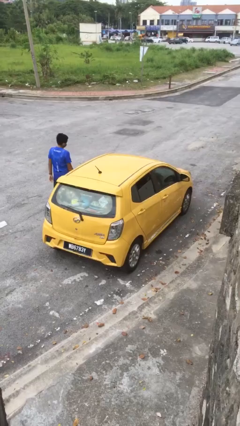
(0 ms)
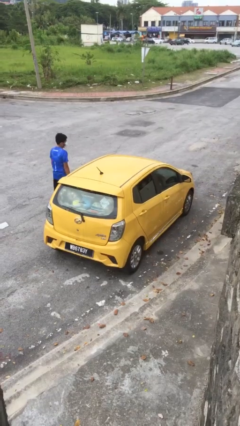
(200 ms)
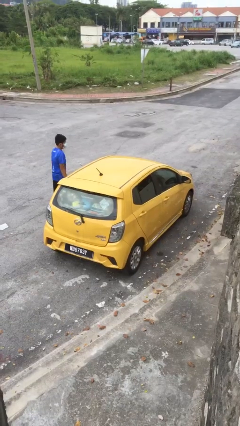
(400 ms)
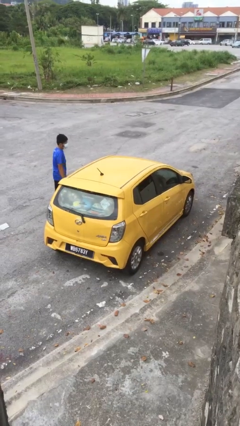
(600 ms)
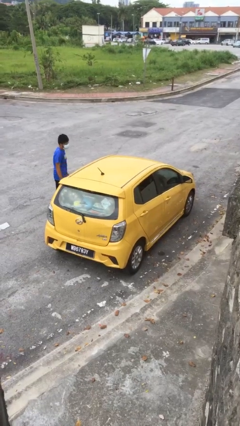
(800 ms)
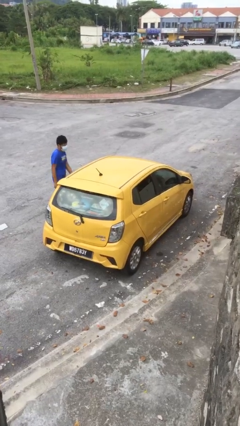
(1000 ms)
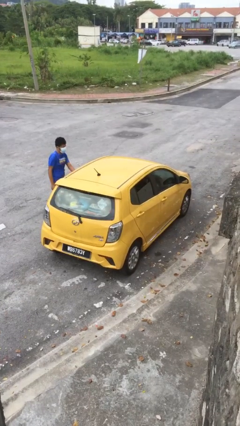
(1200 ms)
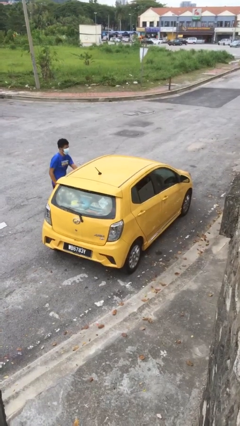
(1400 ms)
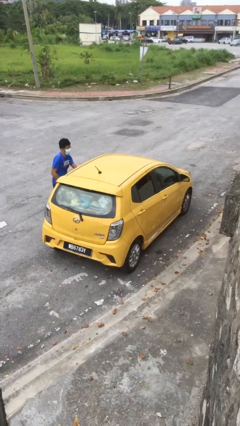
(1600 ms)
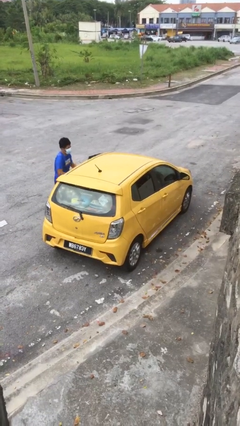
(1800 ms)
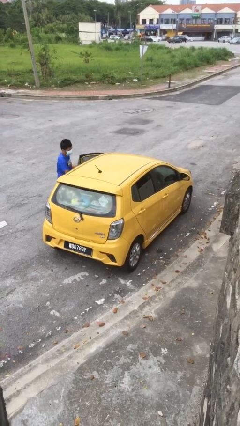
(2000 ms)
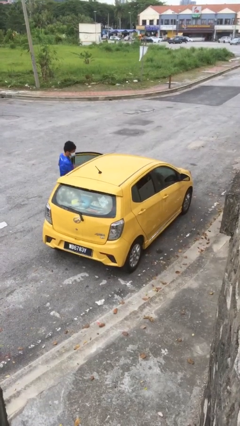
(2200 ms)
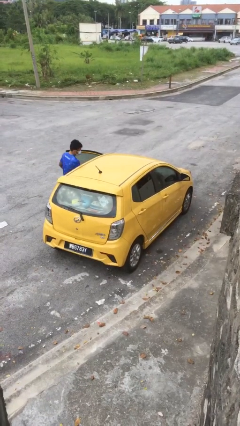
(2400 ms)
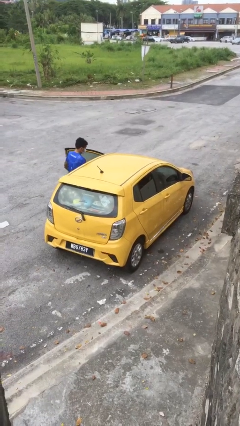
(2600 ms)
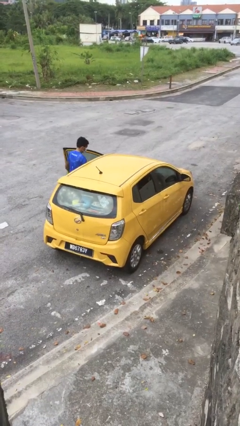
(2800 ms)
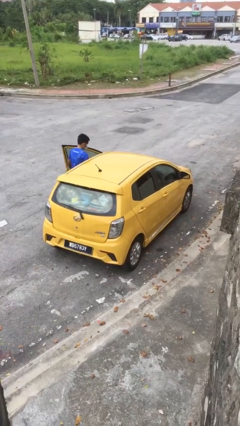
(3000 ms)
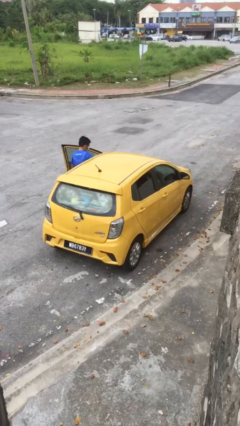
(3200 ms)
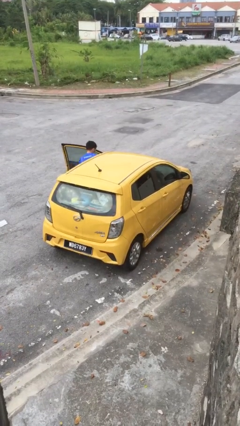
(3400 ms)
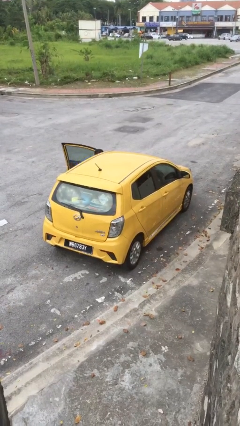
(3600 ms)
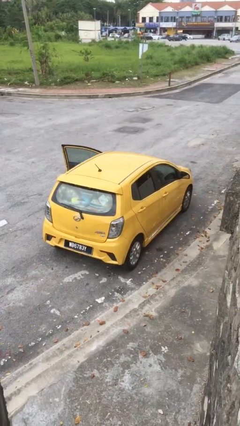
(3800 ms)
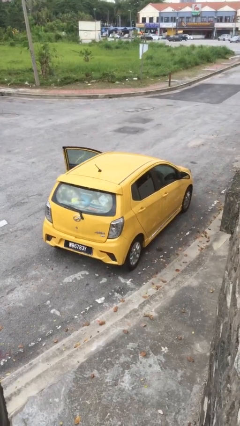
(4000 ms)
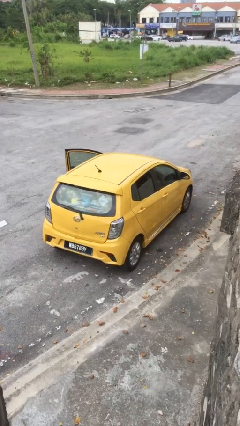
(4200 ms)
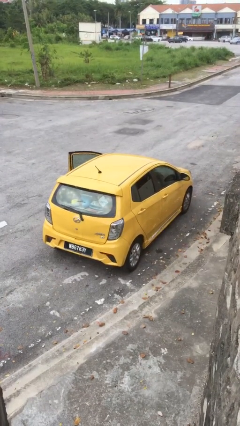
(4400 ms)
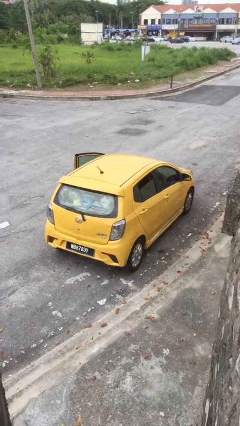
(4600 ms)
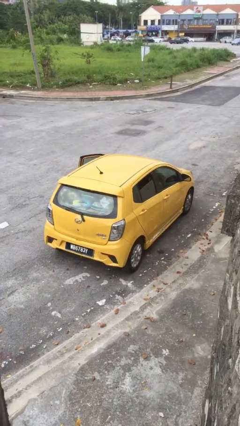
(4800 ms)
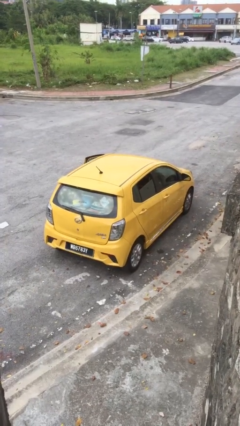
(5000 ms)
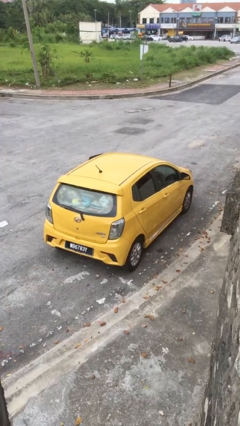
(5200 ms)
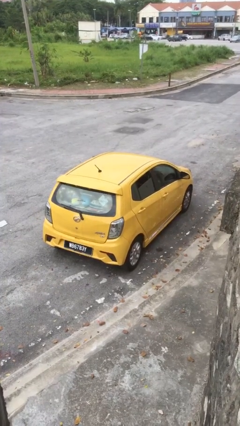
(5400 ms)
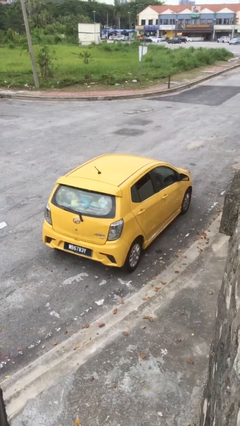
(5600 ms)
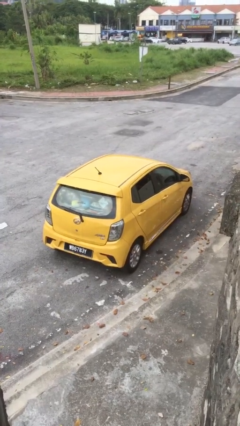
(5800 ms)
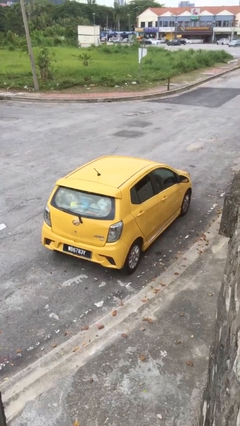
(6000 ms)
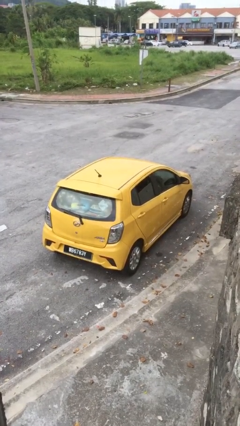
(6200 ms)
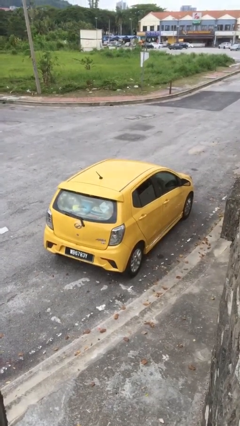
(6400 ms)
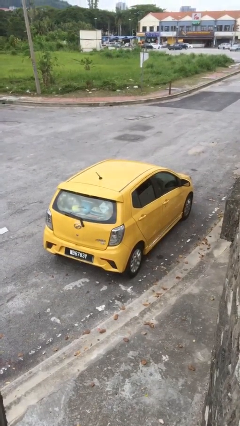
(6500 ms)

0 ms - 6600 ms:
car picks up person

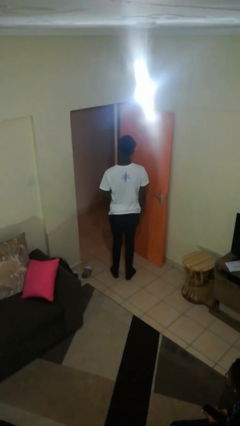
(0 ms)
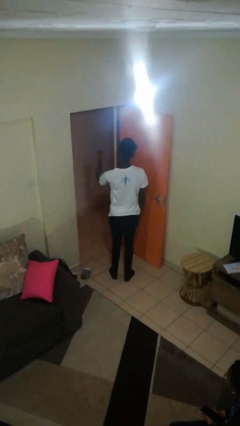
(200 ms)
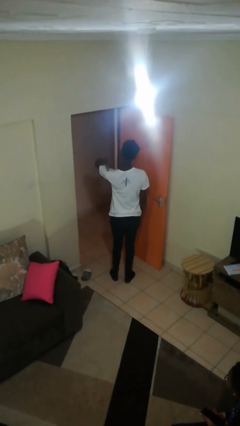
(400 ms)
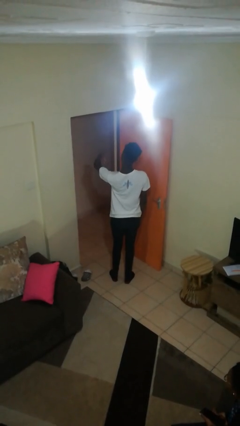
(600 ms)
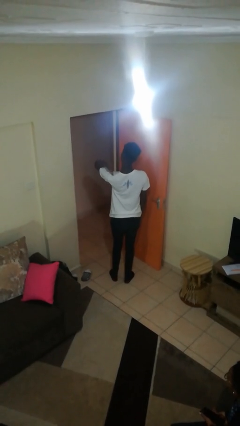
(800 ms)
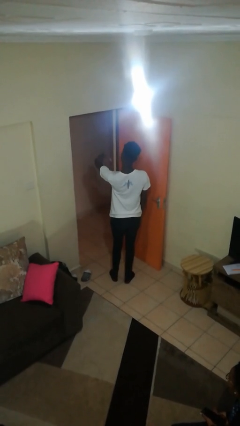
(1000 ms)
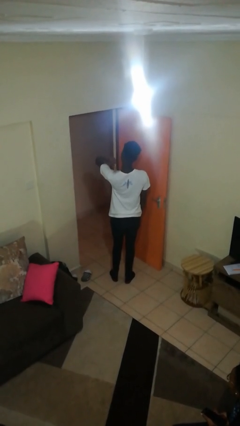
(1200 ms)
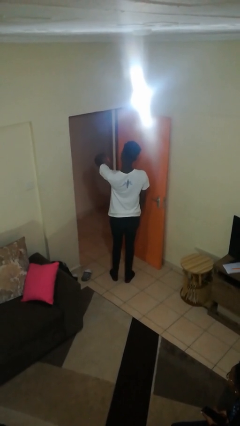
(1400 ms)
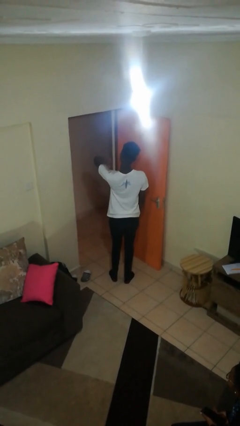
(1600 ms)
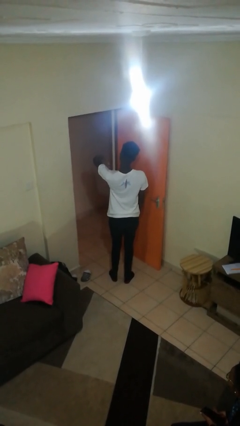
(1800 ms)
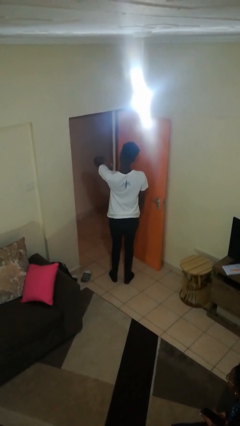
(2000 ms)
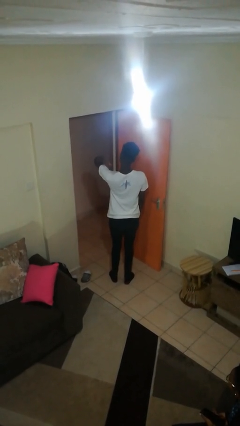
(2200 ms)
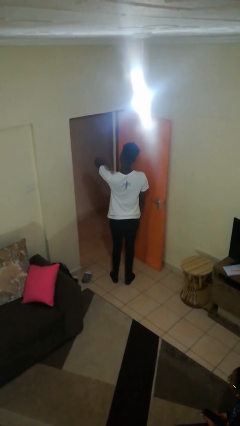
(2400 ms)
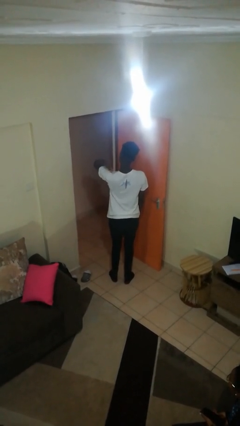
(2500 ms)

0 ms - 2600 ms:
person gestures behind me

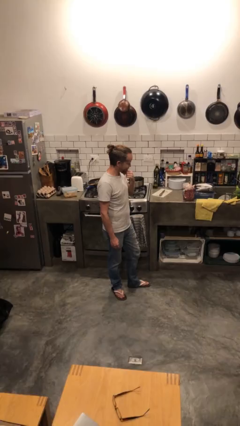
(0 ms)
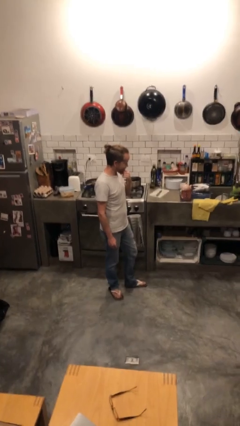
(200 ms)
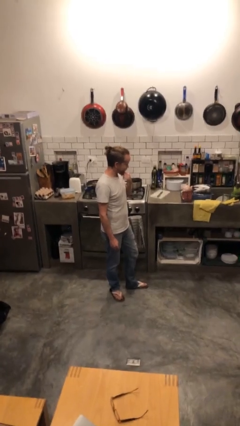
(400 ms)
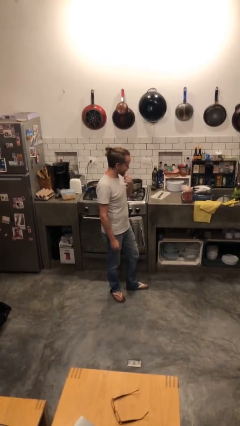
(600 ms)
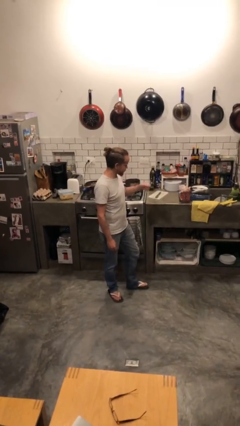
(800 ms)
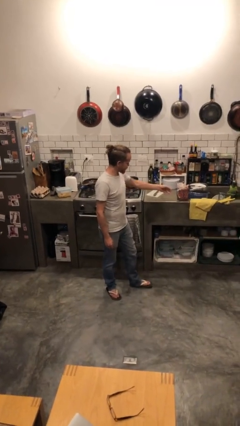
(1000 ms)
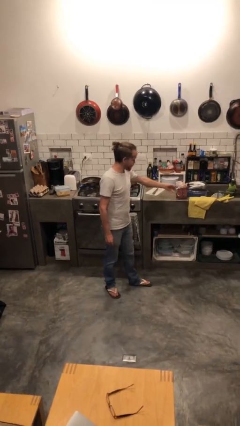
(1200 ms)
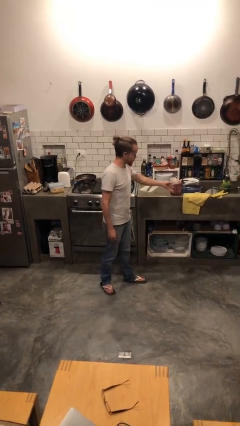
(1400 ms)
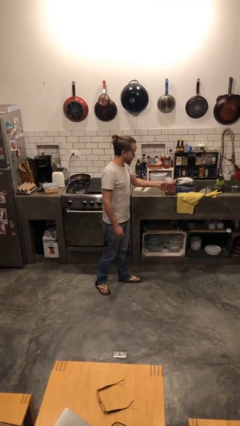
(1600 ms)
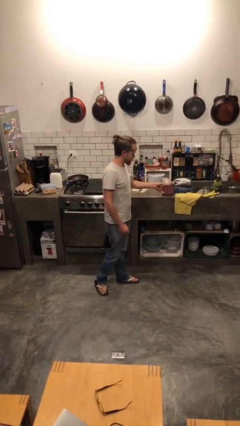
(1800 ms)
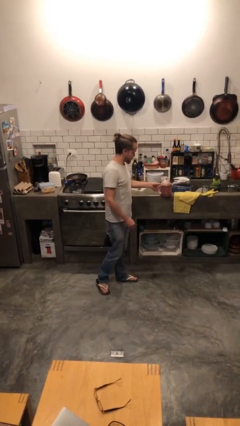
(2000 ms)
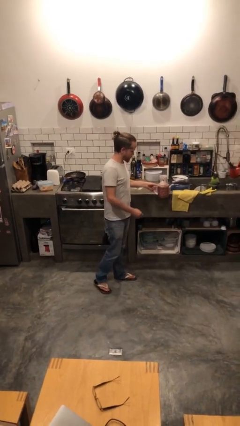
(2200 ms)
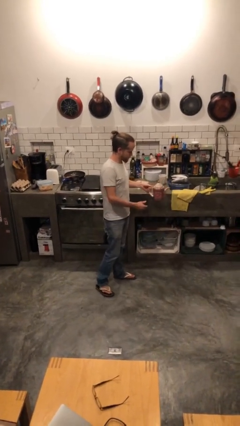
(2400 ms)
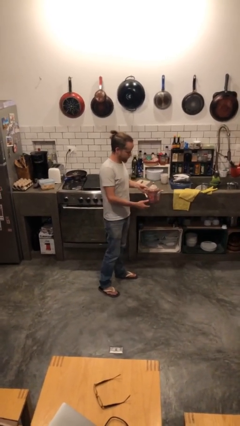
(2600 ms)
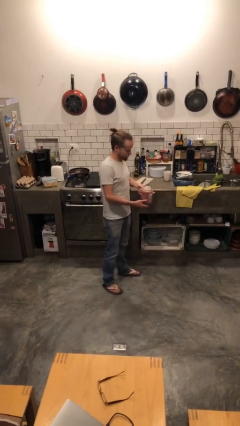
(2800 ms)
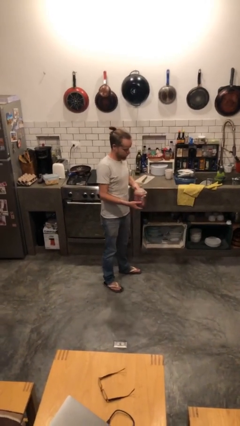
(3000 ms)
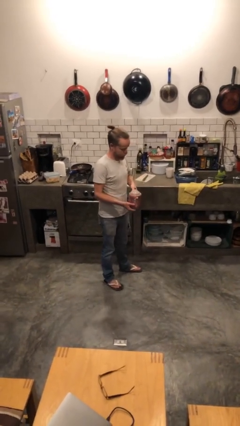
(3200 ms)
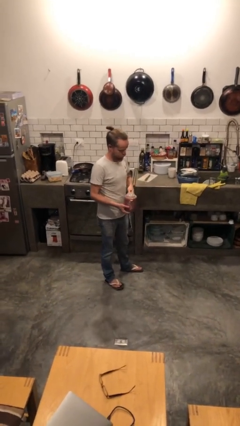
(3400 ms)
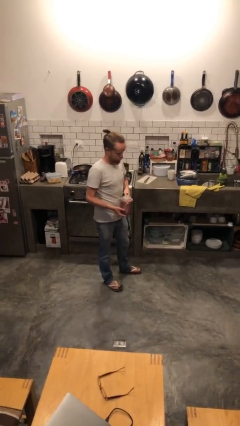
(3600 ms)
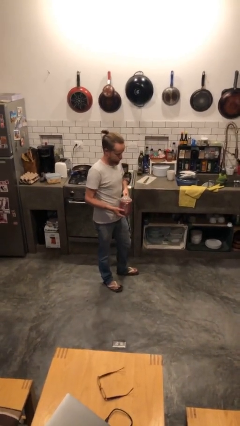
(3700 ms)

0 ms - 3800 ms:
person picks up object from countertop

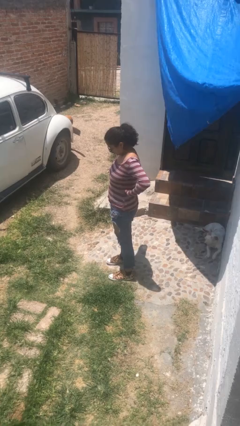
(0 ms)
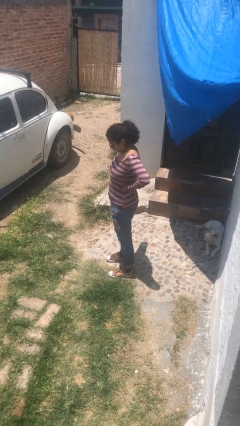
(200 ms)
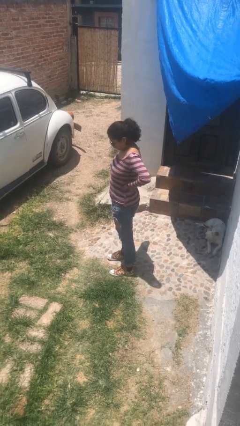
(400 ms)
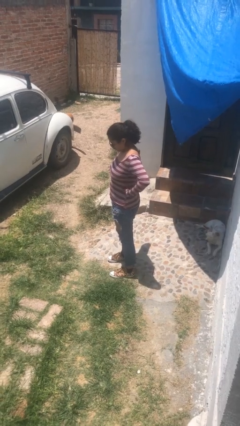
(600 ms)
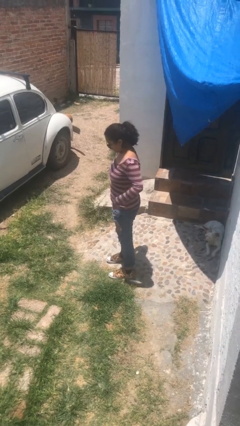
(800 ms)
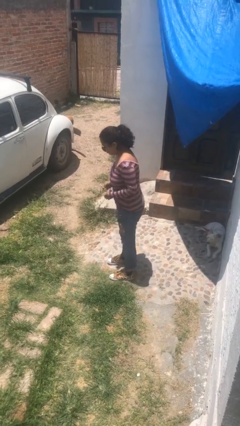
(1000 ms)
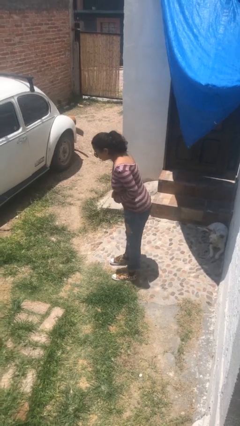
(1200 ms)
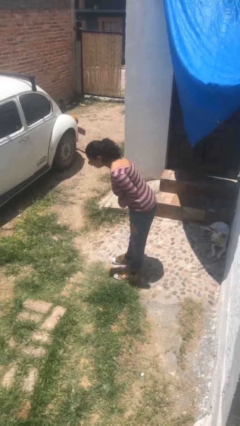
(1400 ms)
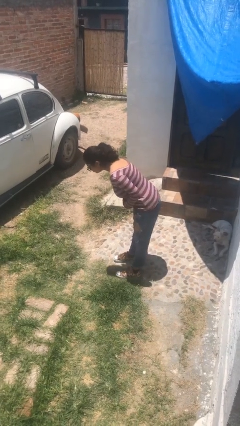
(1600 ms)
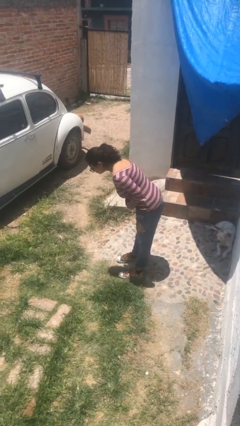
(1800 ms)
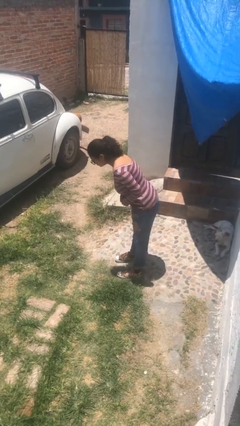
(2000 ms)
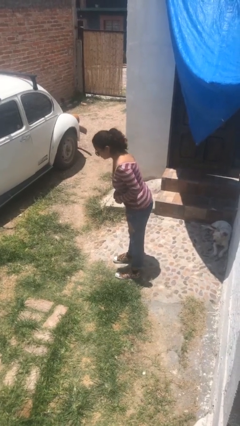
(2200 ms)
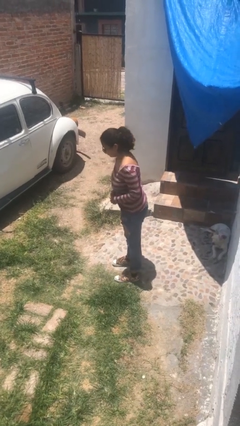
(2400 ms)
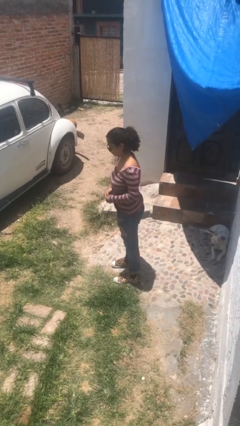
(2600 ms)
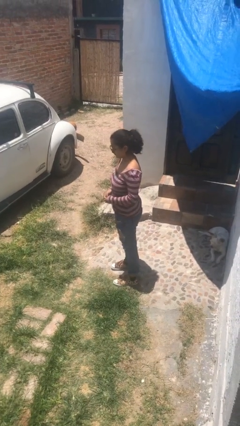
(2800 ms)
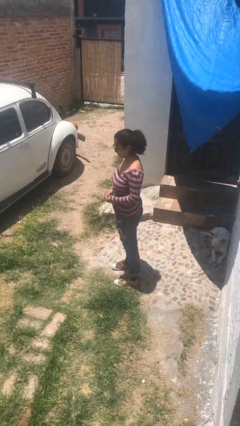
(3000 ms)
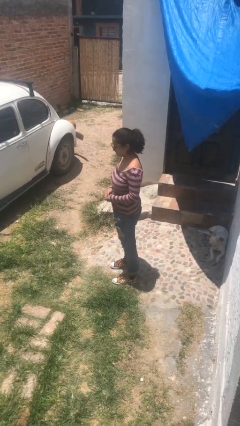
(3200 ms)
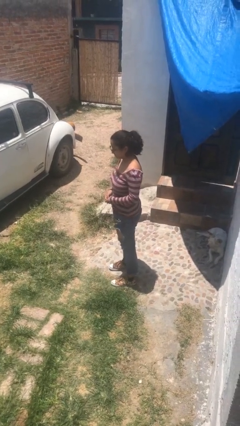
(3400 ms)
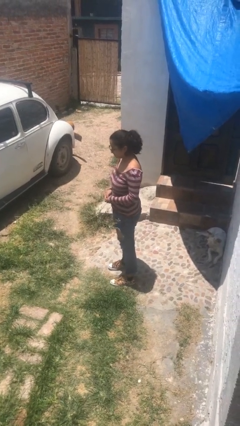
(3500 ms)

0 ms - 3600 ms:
person bows

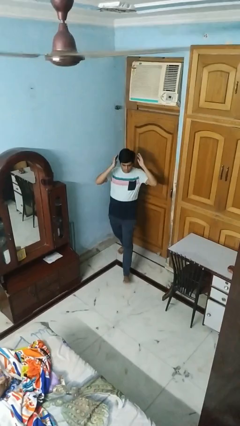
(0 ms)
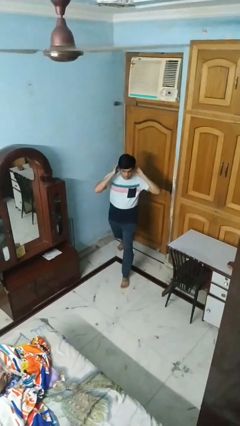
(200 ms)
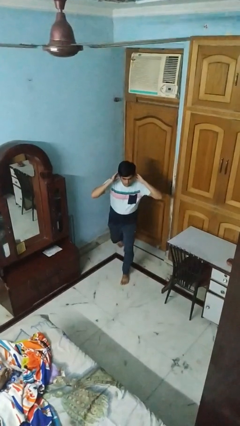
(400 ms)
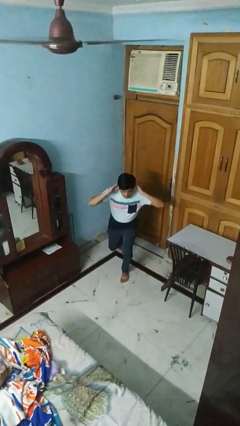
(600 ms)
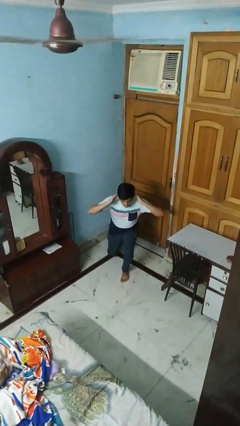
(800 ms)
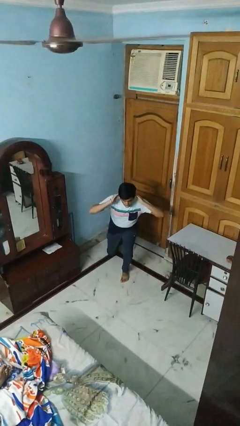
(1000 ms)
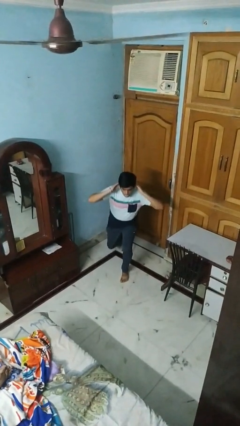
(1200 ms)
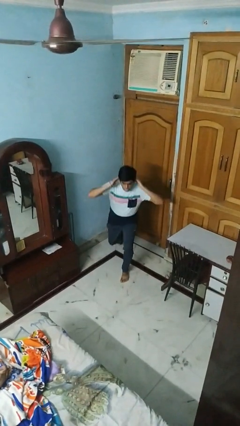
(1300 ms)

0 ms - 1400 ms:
person exercises with lunges
